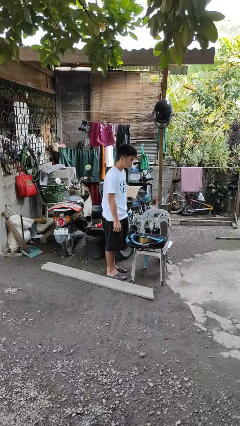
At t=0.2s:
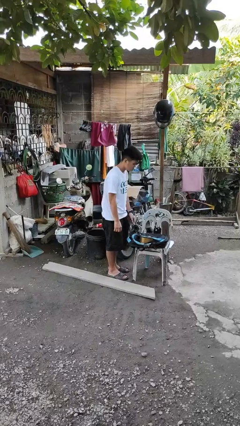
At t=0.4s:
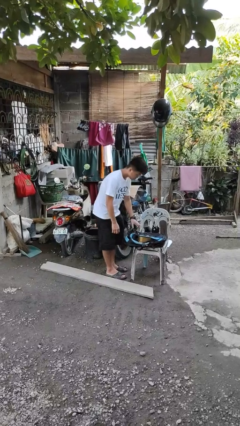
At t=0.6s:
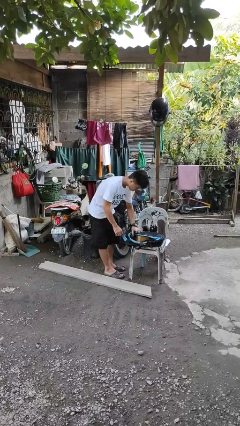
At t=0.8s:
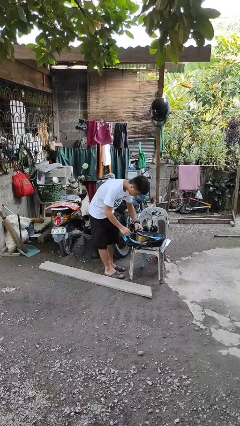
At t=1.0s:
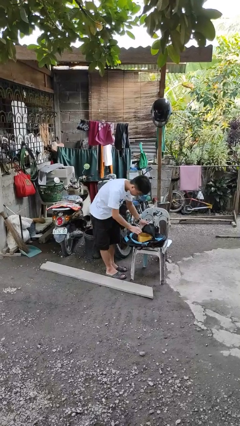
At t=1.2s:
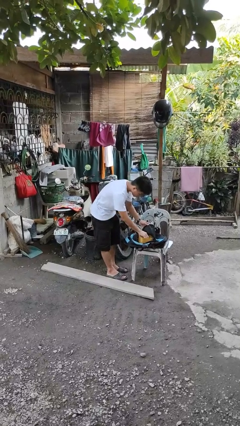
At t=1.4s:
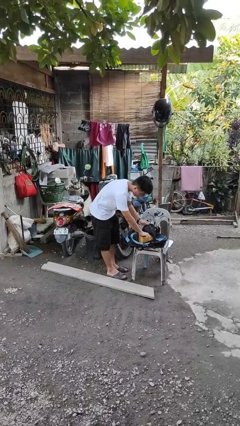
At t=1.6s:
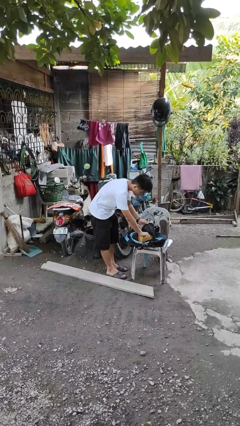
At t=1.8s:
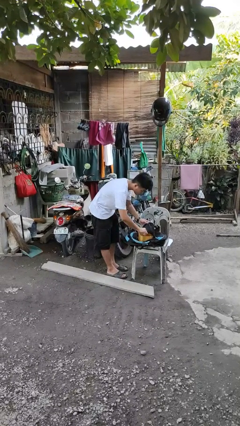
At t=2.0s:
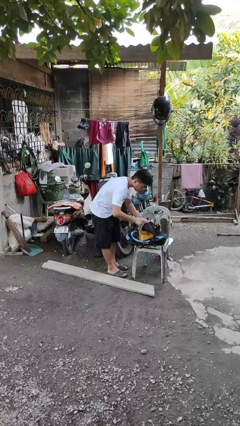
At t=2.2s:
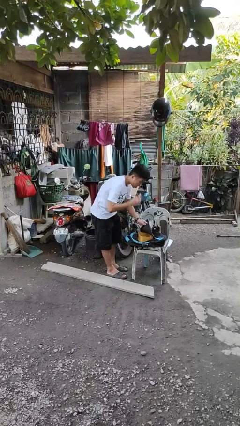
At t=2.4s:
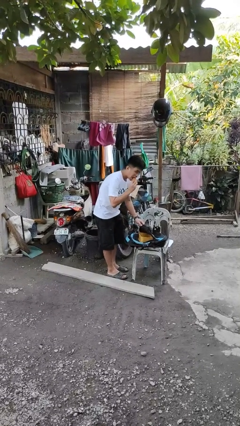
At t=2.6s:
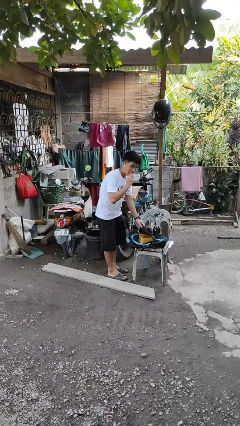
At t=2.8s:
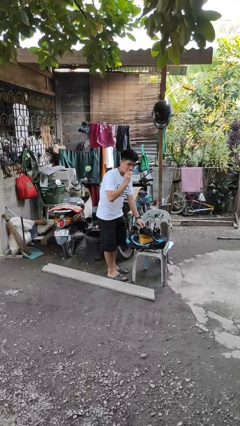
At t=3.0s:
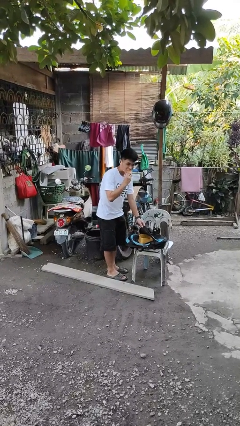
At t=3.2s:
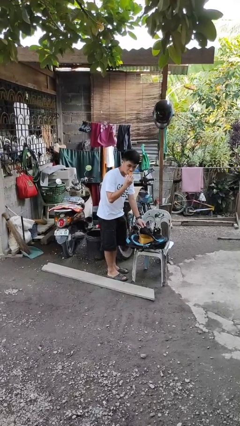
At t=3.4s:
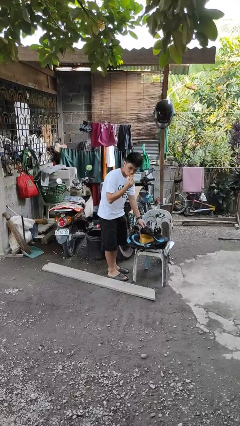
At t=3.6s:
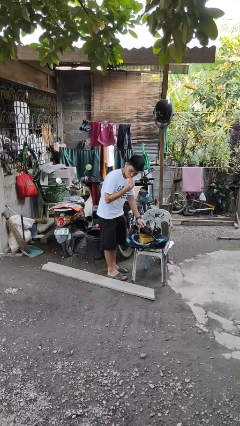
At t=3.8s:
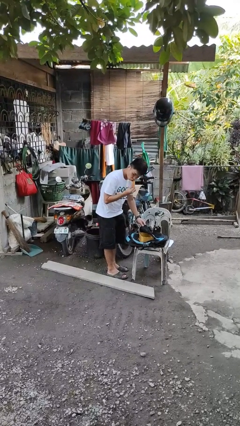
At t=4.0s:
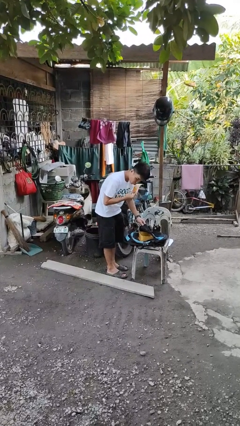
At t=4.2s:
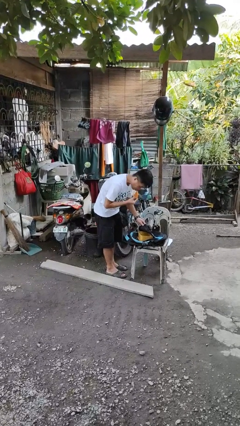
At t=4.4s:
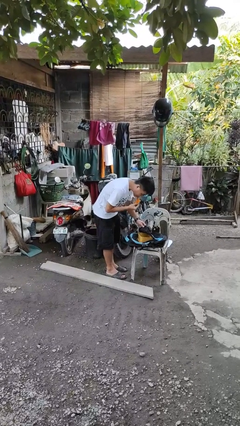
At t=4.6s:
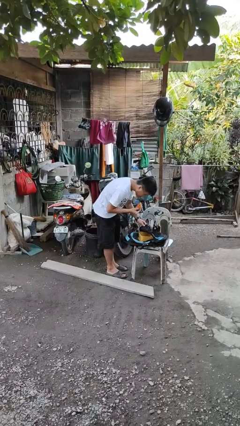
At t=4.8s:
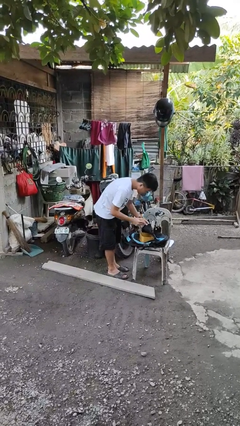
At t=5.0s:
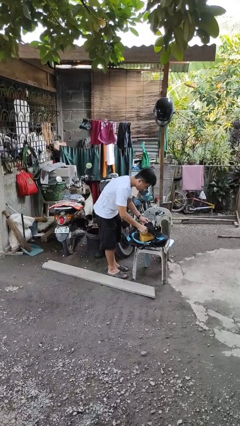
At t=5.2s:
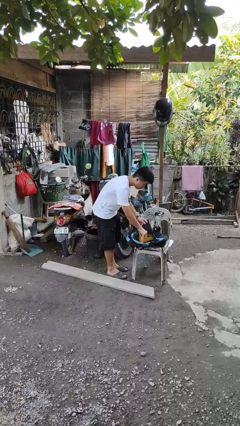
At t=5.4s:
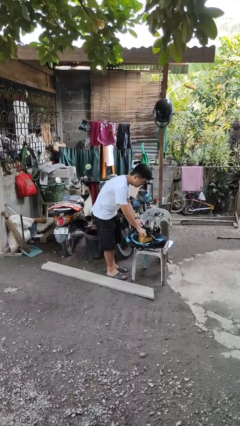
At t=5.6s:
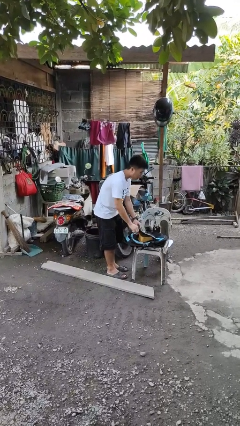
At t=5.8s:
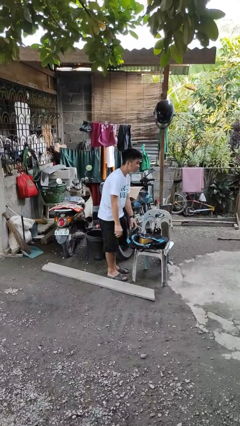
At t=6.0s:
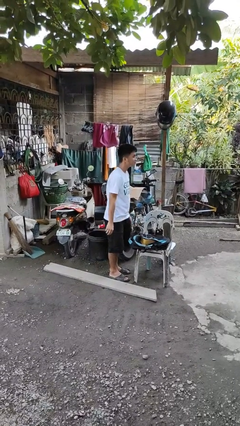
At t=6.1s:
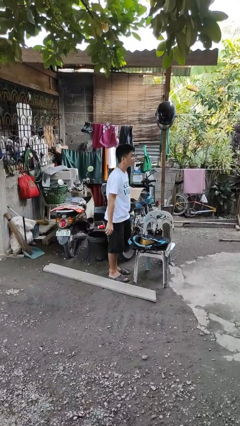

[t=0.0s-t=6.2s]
person eats snack from bag

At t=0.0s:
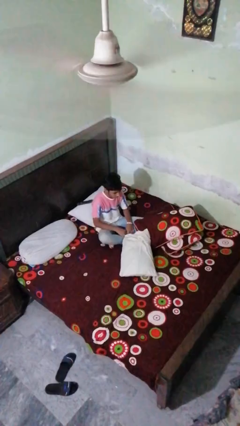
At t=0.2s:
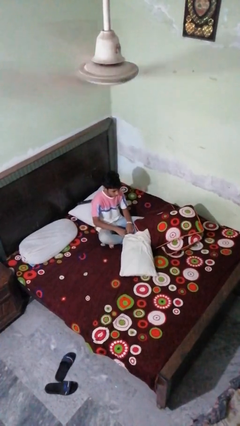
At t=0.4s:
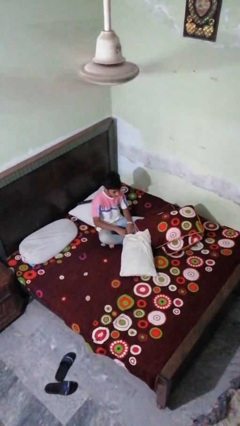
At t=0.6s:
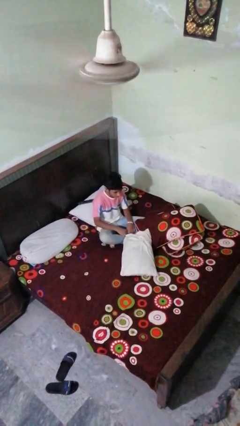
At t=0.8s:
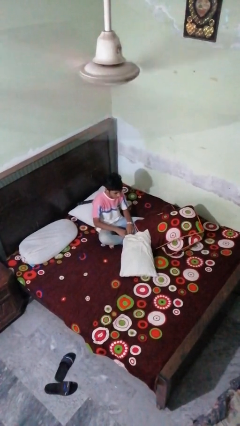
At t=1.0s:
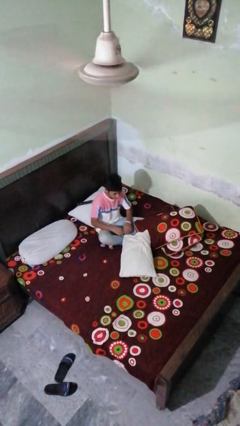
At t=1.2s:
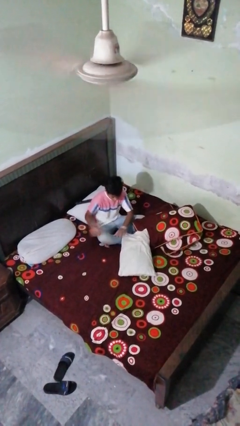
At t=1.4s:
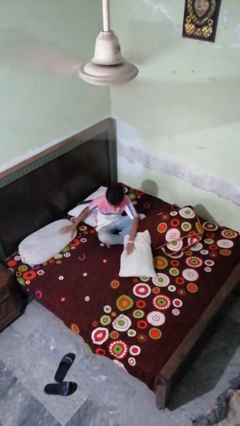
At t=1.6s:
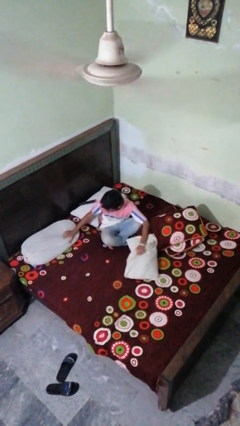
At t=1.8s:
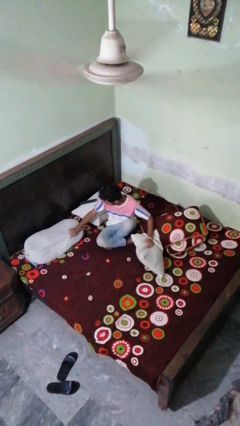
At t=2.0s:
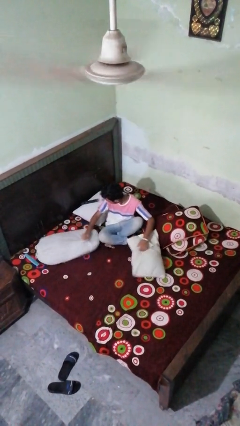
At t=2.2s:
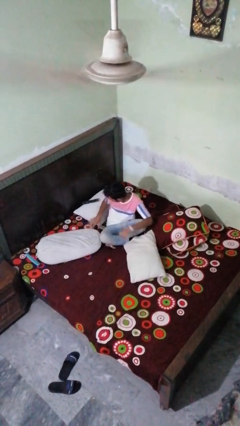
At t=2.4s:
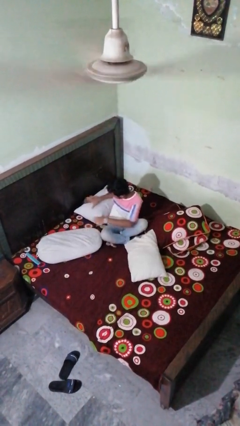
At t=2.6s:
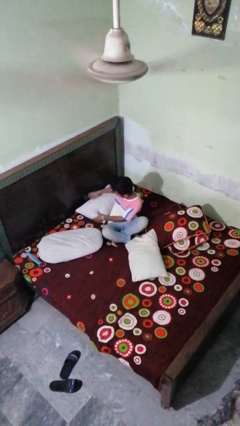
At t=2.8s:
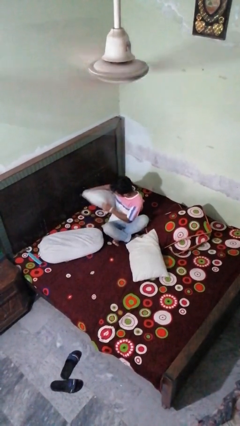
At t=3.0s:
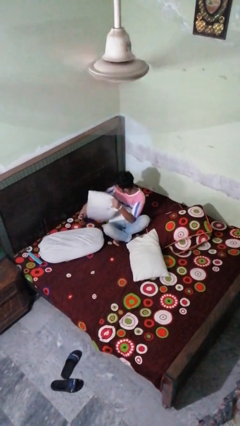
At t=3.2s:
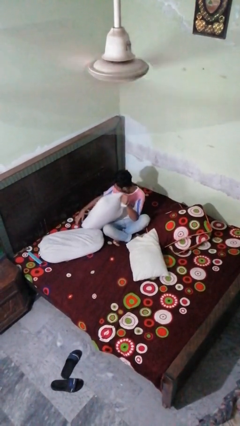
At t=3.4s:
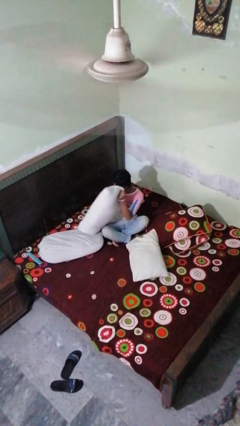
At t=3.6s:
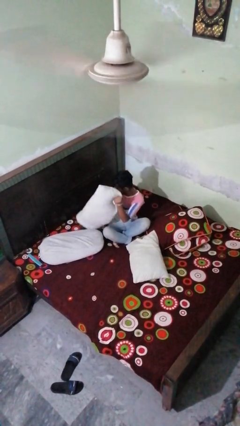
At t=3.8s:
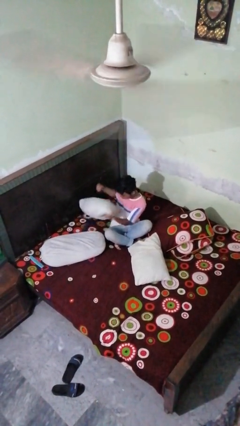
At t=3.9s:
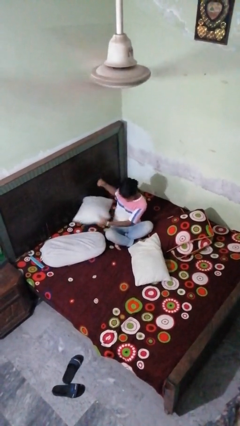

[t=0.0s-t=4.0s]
person searches under bed

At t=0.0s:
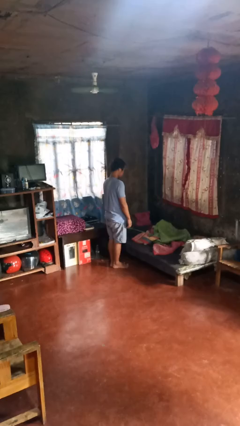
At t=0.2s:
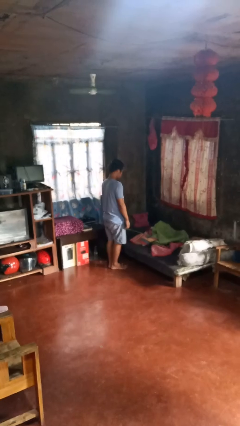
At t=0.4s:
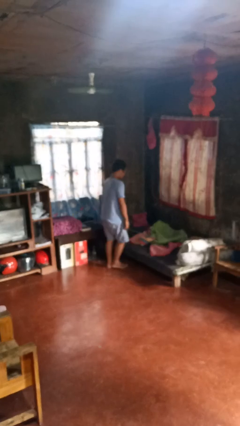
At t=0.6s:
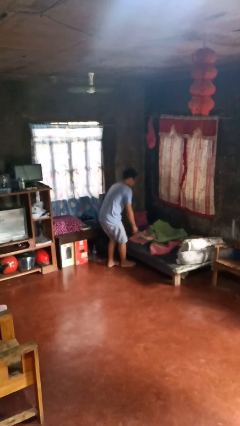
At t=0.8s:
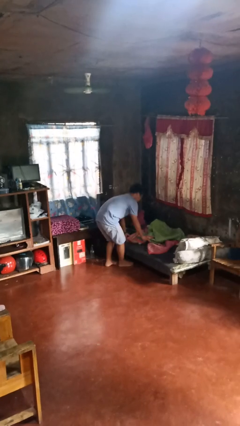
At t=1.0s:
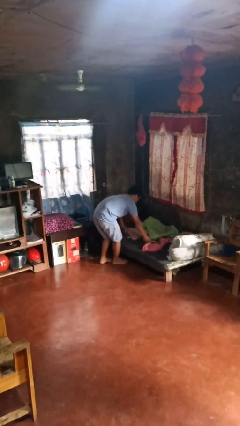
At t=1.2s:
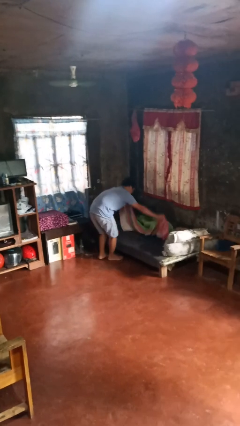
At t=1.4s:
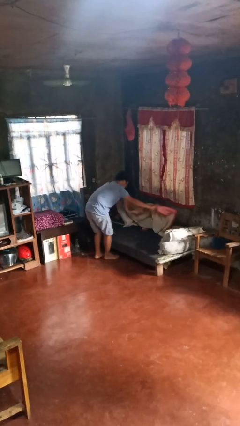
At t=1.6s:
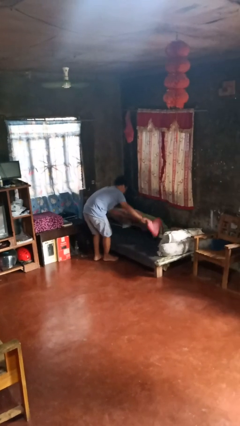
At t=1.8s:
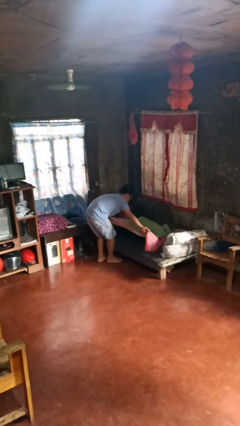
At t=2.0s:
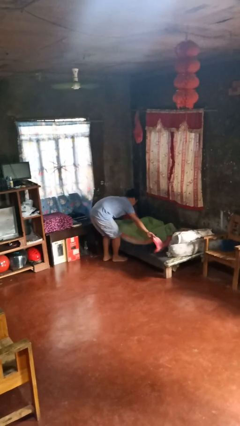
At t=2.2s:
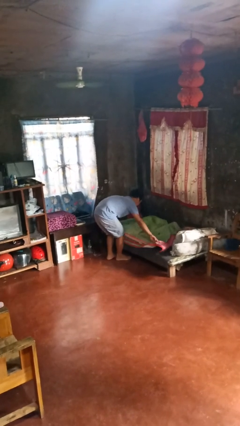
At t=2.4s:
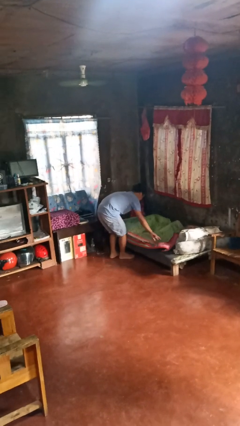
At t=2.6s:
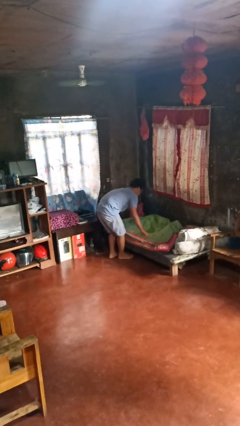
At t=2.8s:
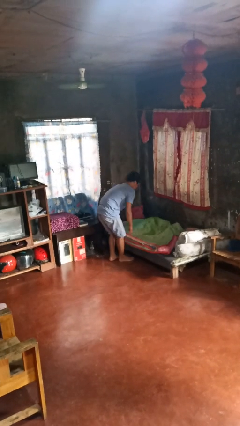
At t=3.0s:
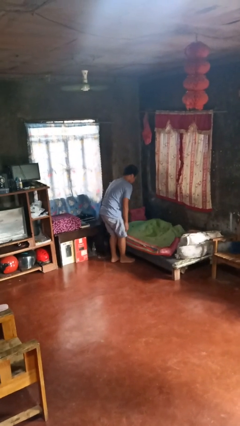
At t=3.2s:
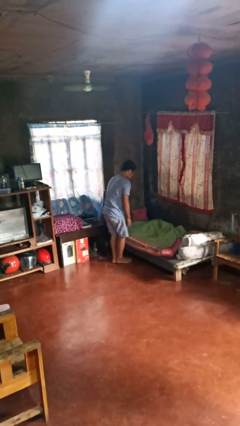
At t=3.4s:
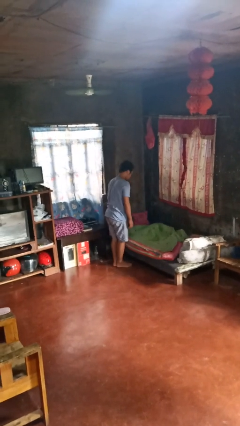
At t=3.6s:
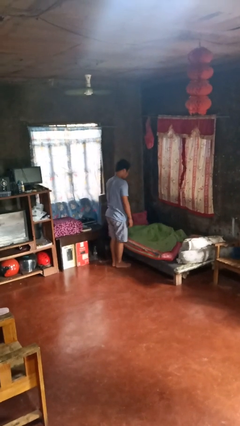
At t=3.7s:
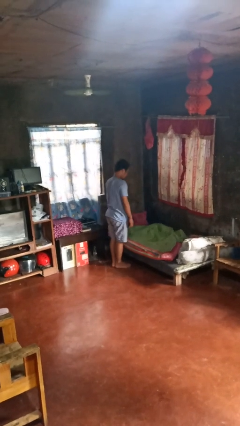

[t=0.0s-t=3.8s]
person makes bed

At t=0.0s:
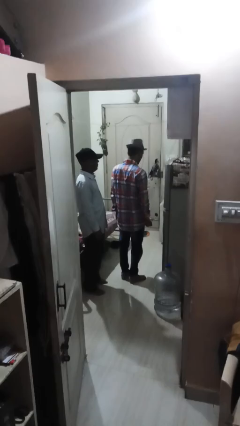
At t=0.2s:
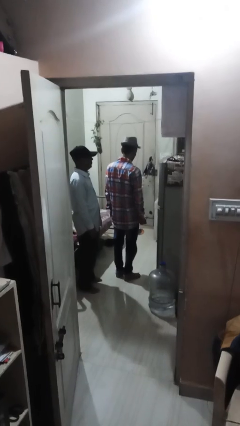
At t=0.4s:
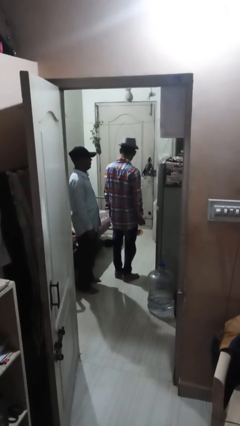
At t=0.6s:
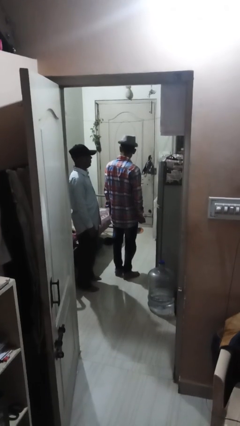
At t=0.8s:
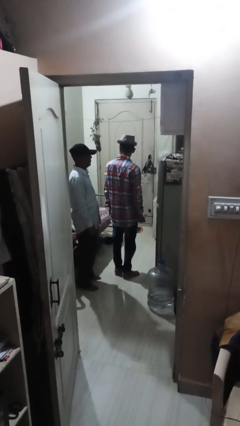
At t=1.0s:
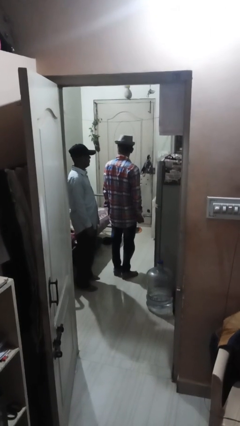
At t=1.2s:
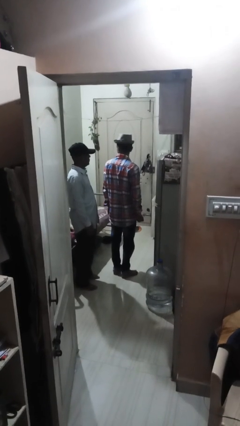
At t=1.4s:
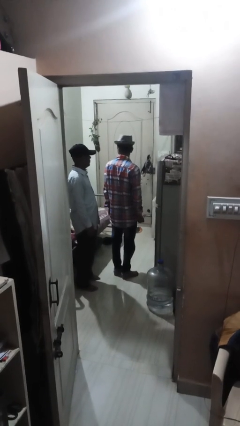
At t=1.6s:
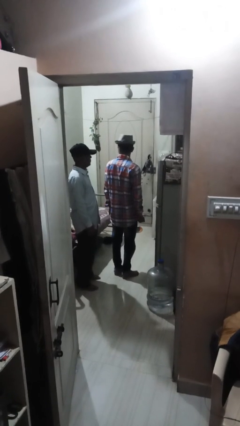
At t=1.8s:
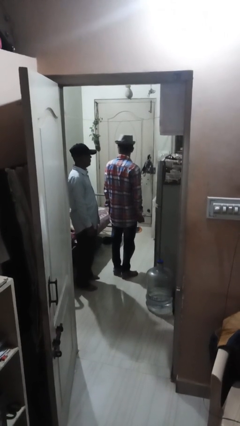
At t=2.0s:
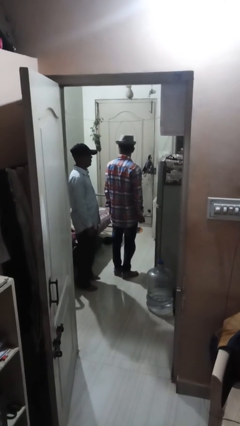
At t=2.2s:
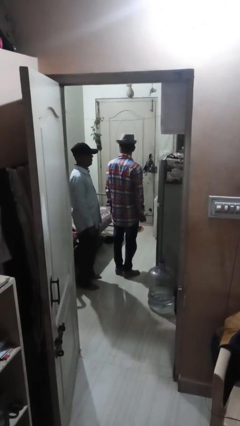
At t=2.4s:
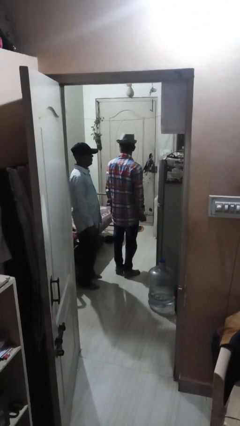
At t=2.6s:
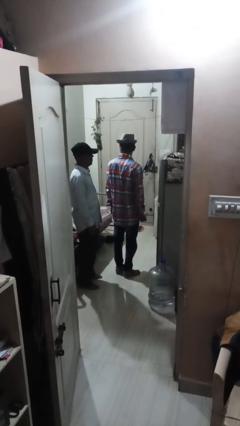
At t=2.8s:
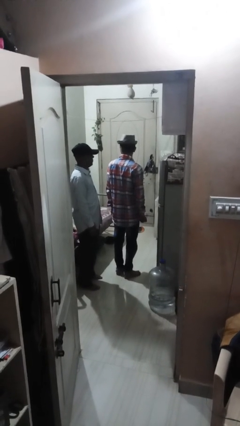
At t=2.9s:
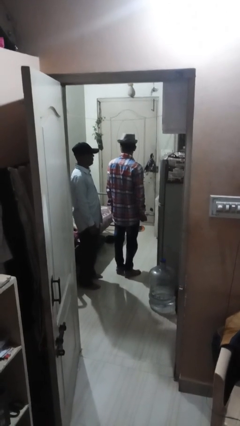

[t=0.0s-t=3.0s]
person looks over shoulder
